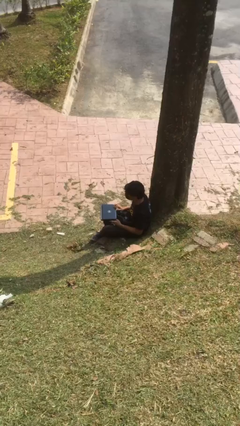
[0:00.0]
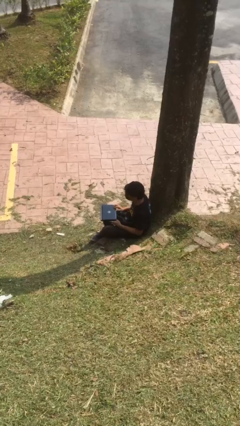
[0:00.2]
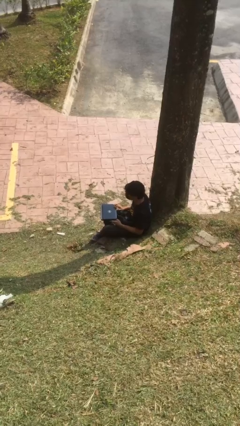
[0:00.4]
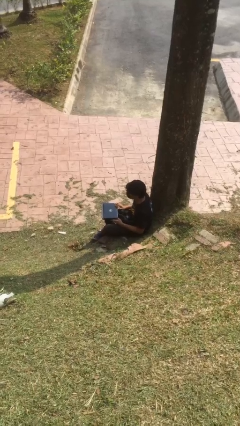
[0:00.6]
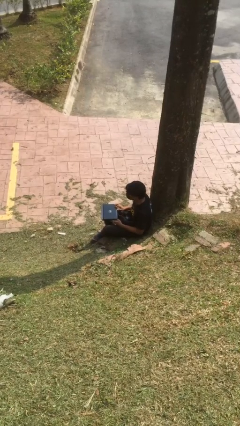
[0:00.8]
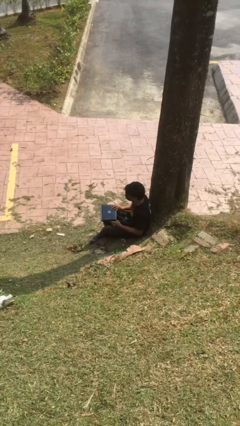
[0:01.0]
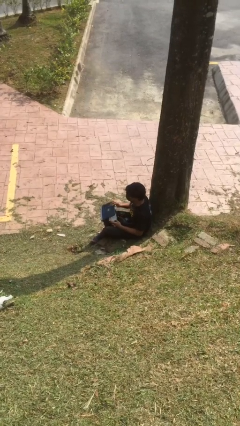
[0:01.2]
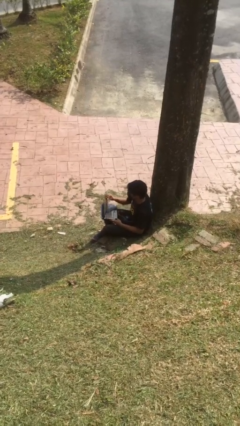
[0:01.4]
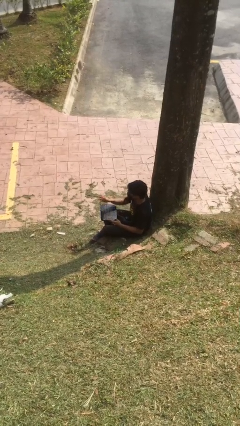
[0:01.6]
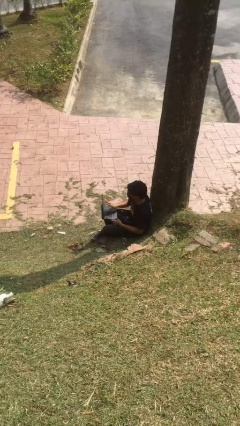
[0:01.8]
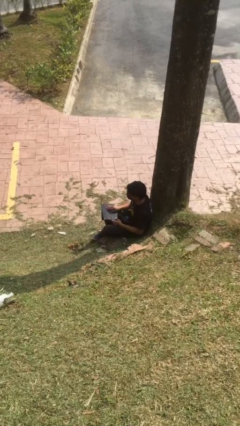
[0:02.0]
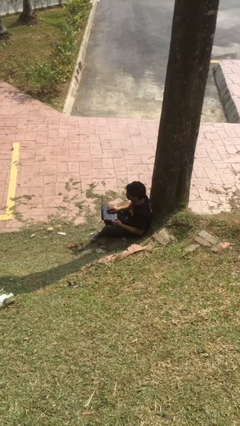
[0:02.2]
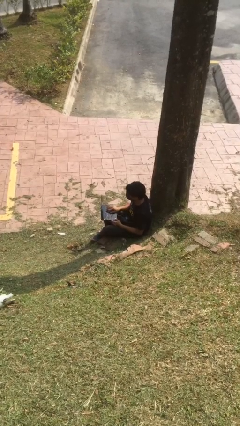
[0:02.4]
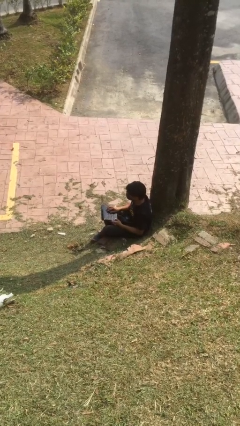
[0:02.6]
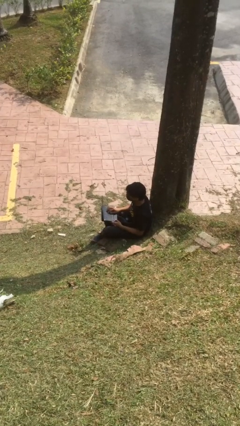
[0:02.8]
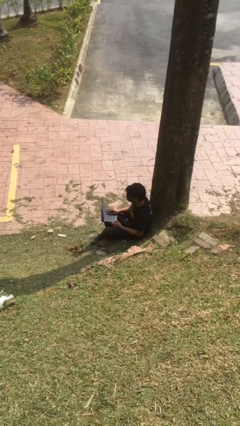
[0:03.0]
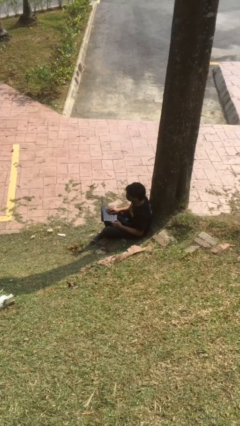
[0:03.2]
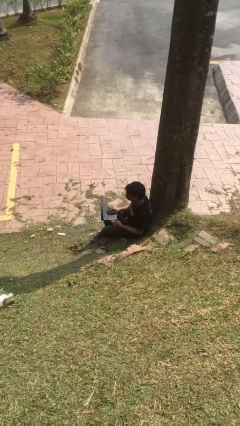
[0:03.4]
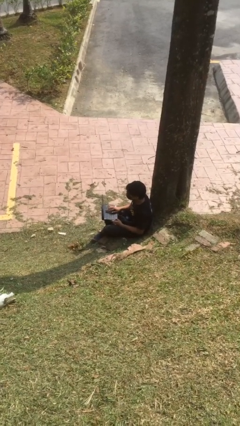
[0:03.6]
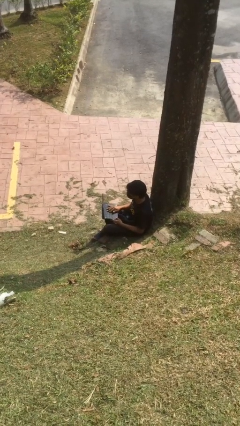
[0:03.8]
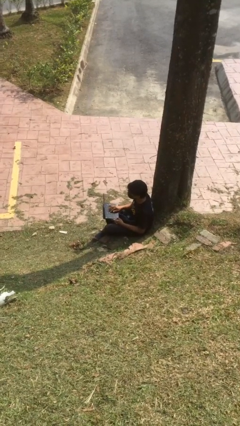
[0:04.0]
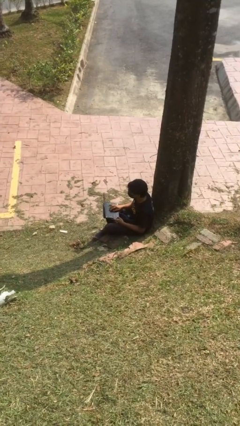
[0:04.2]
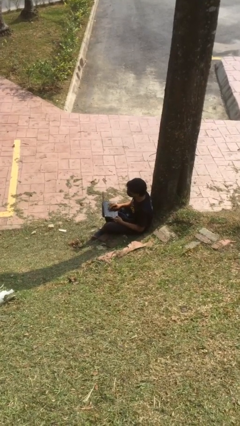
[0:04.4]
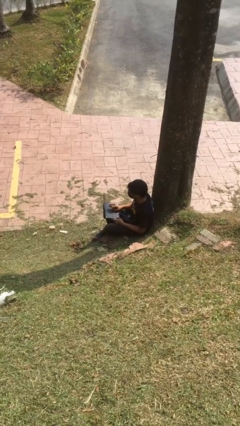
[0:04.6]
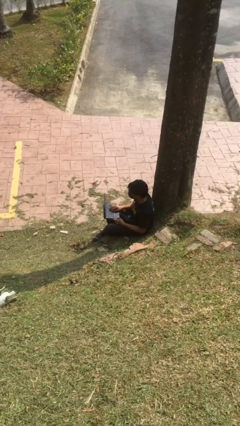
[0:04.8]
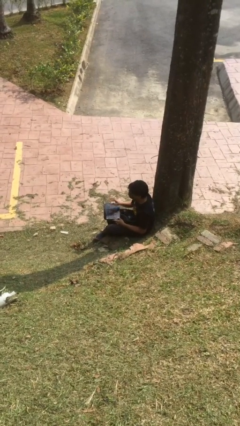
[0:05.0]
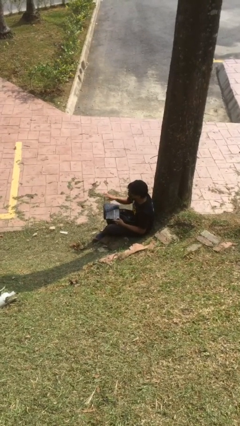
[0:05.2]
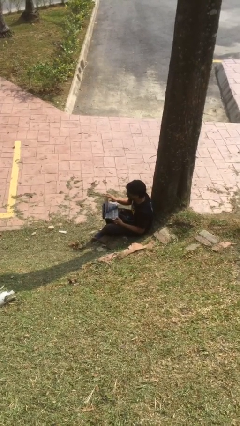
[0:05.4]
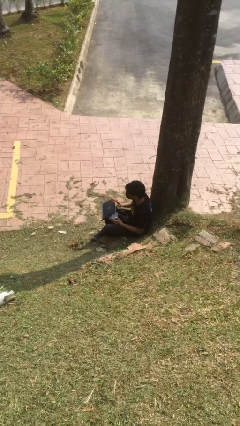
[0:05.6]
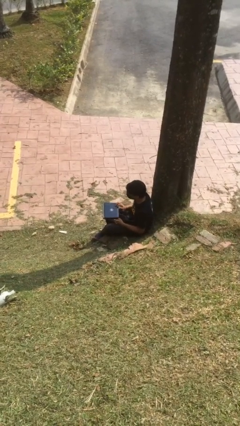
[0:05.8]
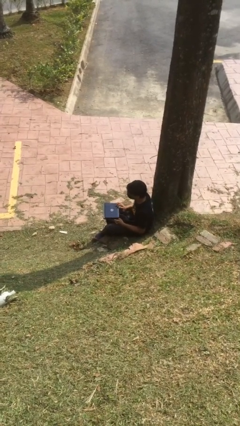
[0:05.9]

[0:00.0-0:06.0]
person interacts with laptop

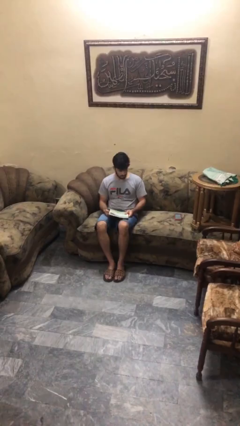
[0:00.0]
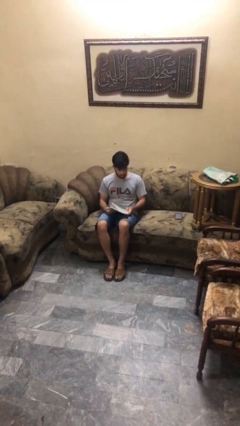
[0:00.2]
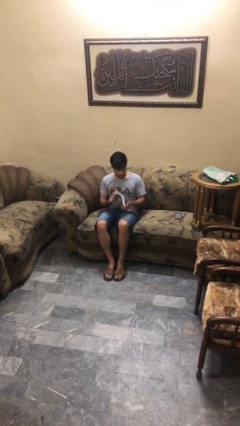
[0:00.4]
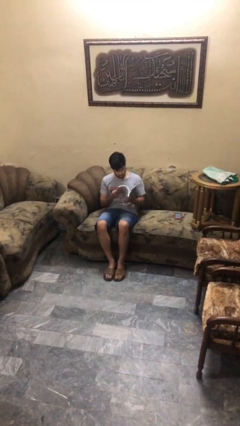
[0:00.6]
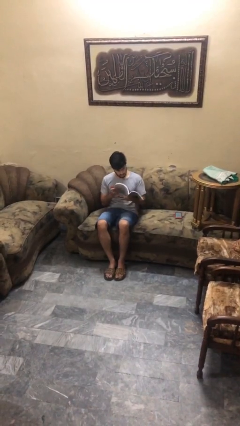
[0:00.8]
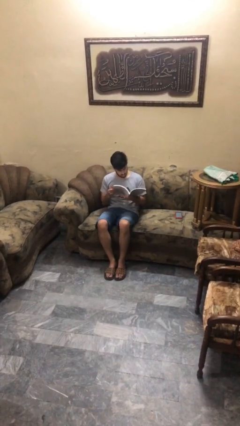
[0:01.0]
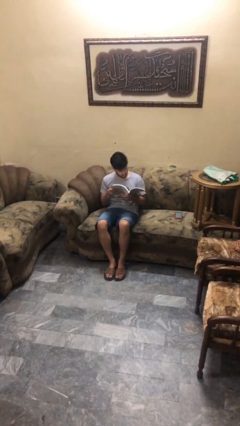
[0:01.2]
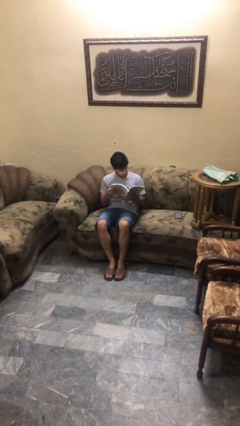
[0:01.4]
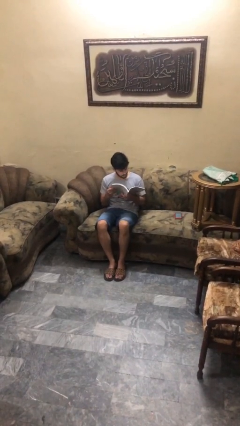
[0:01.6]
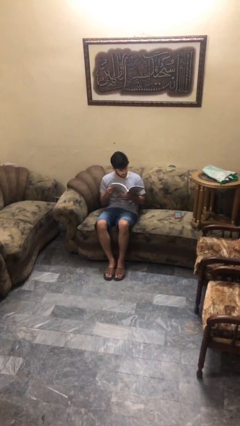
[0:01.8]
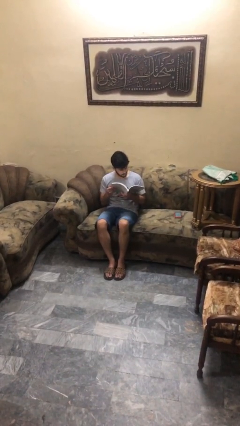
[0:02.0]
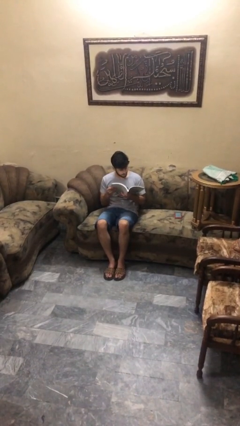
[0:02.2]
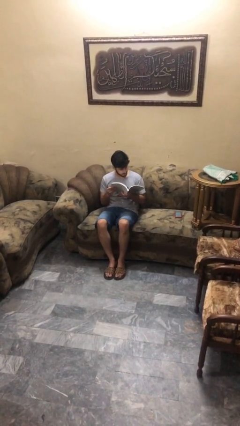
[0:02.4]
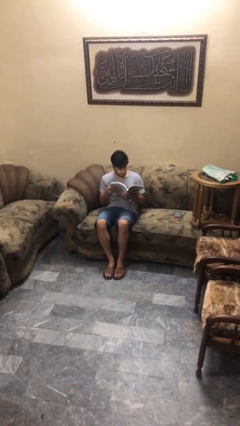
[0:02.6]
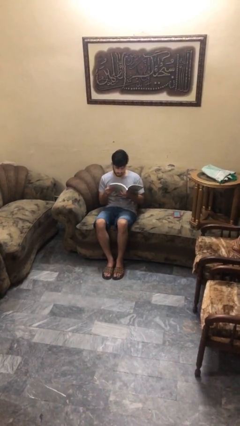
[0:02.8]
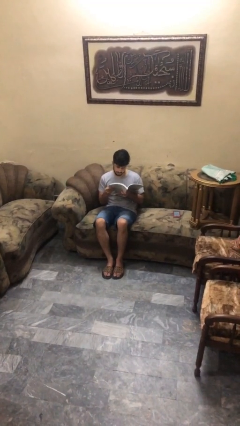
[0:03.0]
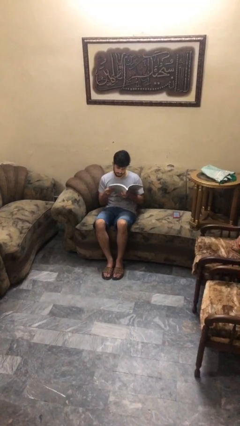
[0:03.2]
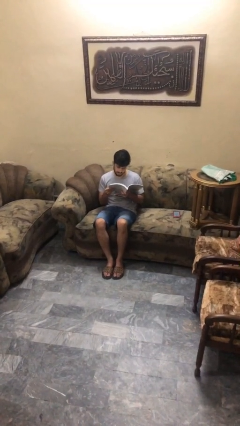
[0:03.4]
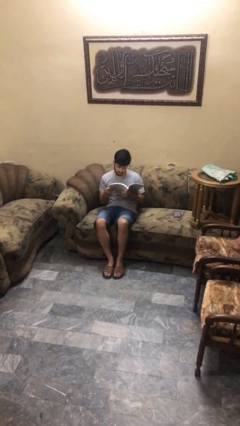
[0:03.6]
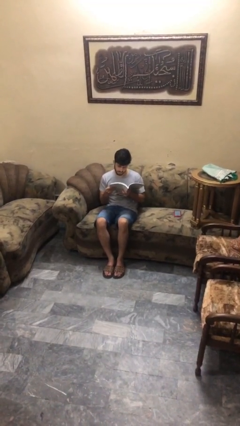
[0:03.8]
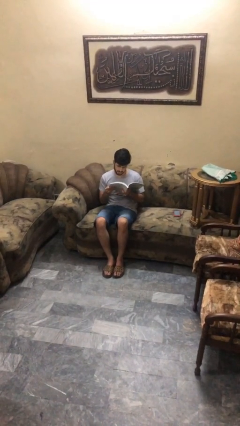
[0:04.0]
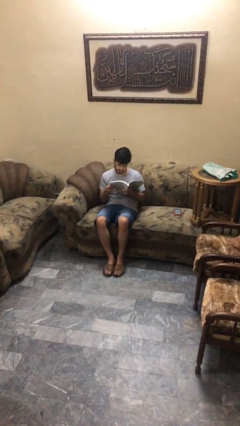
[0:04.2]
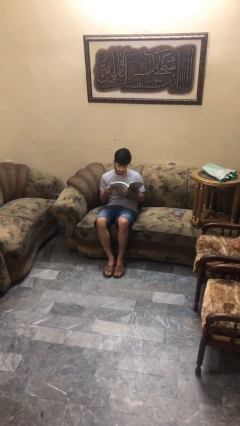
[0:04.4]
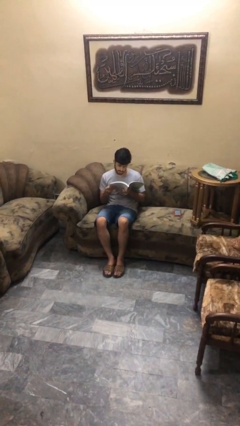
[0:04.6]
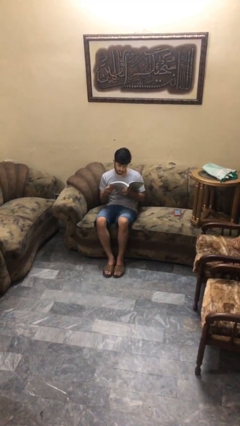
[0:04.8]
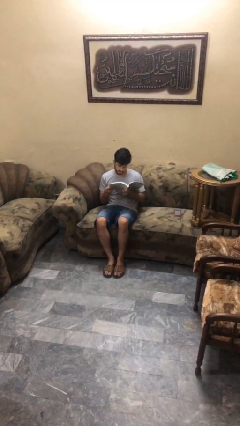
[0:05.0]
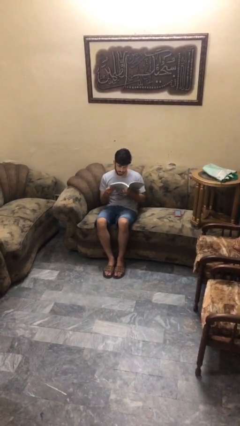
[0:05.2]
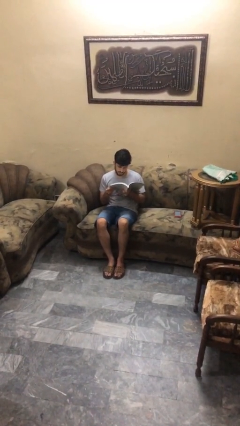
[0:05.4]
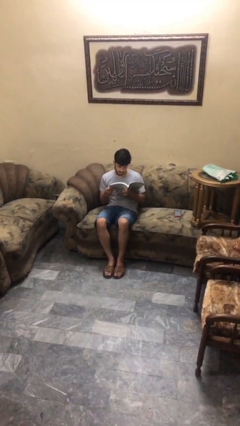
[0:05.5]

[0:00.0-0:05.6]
person reads book

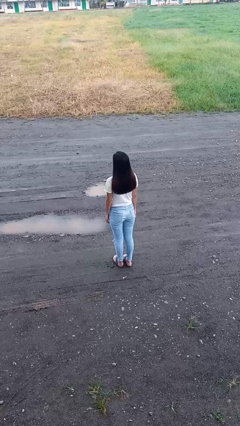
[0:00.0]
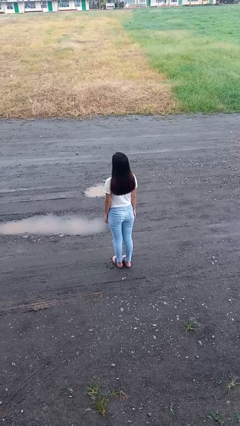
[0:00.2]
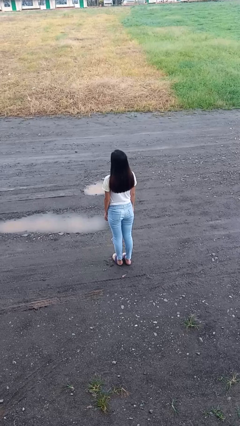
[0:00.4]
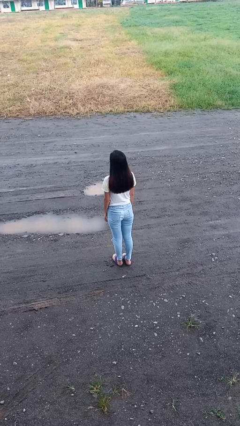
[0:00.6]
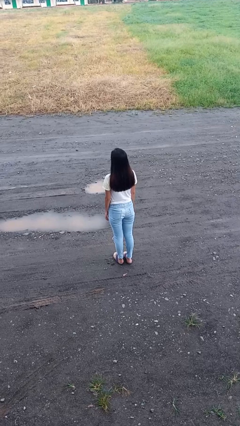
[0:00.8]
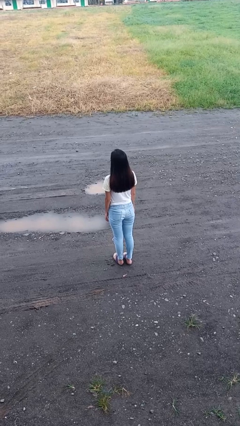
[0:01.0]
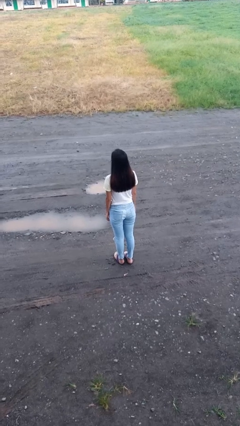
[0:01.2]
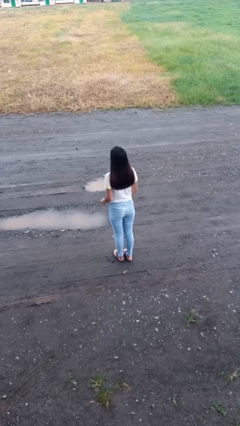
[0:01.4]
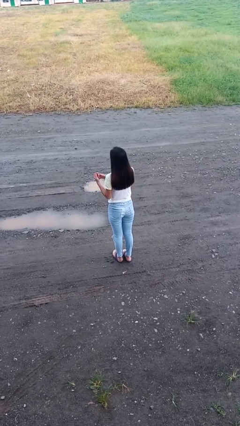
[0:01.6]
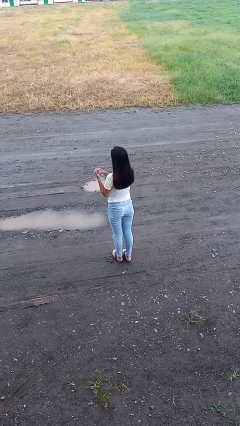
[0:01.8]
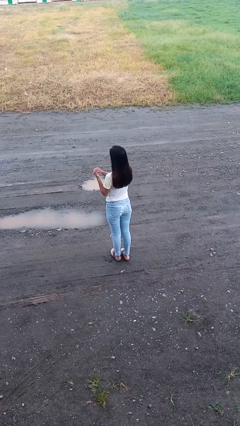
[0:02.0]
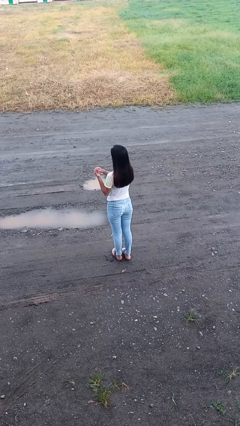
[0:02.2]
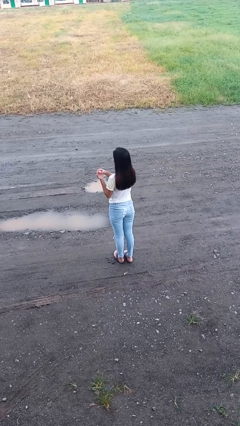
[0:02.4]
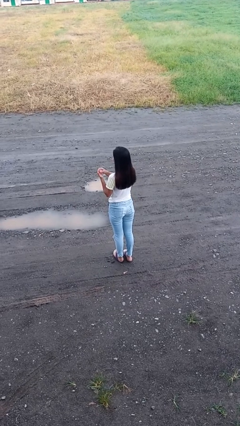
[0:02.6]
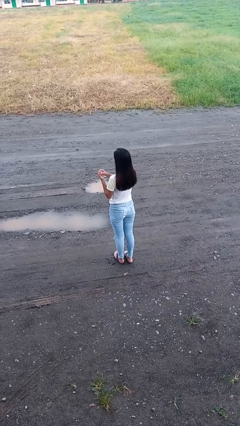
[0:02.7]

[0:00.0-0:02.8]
person cracks knuckles

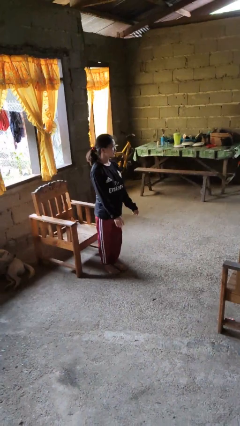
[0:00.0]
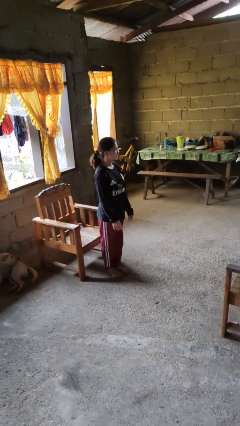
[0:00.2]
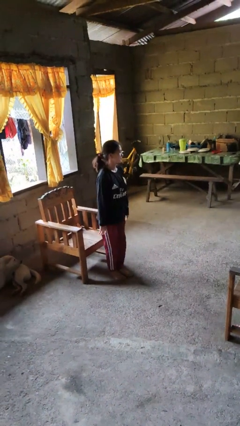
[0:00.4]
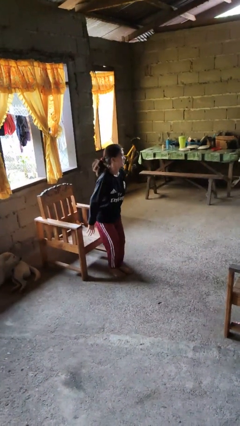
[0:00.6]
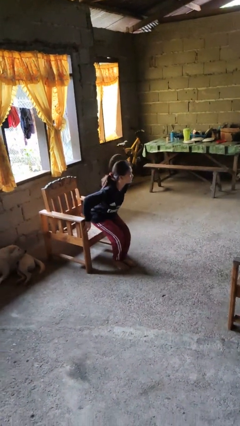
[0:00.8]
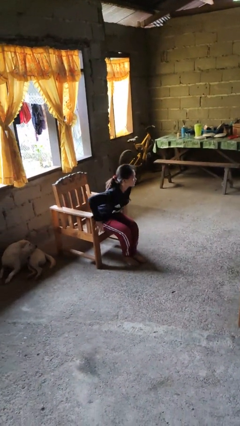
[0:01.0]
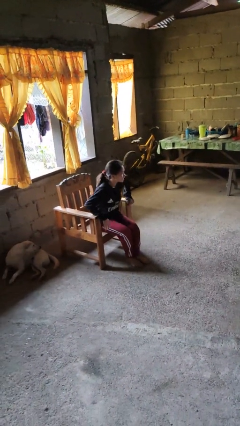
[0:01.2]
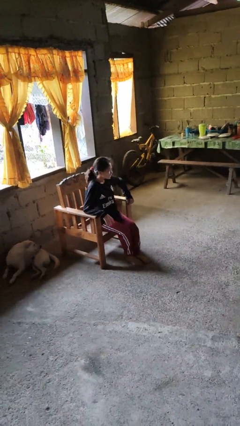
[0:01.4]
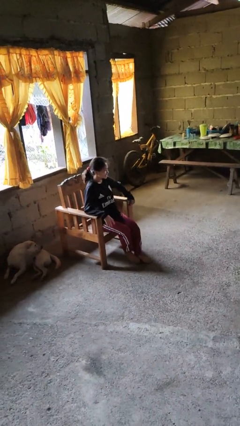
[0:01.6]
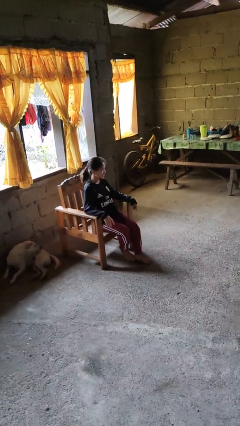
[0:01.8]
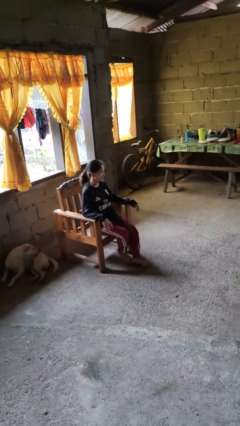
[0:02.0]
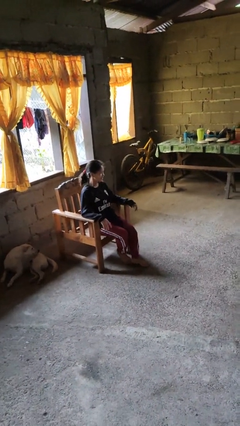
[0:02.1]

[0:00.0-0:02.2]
person sits down

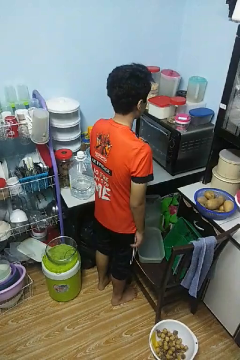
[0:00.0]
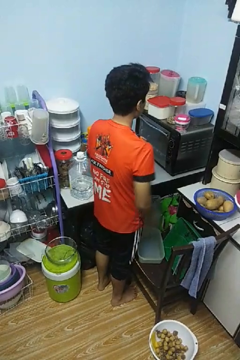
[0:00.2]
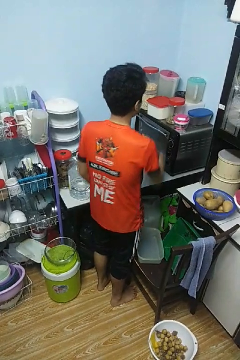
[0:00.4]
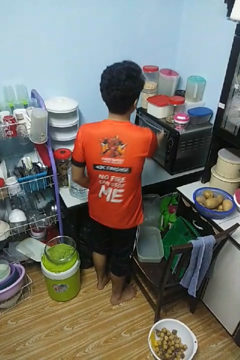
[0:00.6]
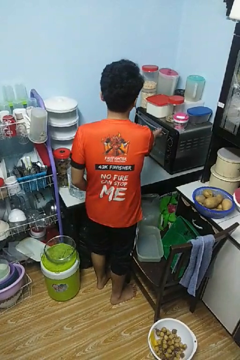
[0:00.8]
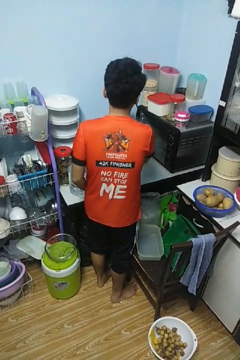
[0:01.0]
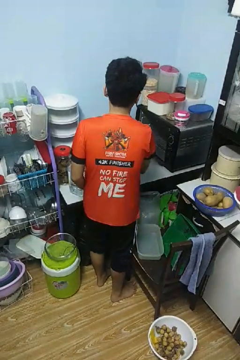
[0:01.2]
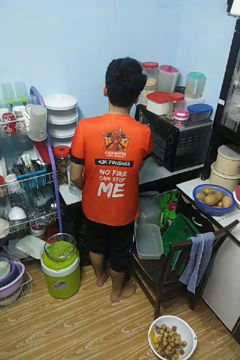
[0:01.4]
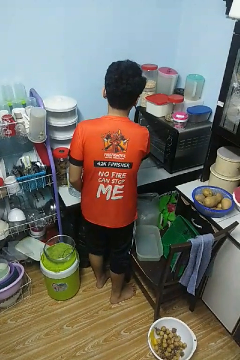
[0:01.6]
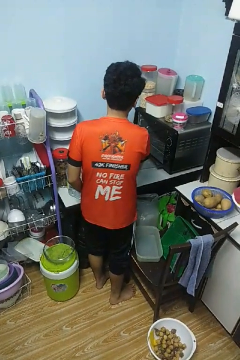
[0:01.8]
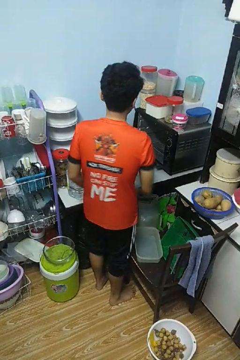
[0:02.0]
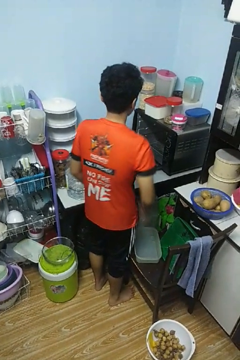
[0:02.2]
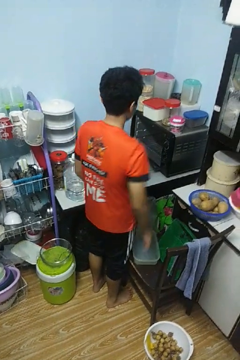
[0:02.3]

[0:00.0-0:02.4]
person opens oven door
